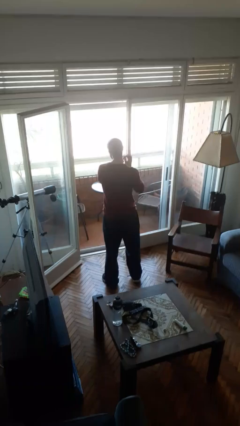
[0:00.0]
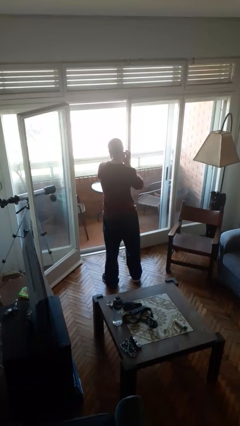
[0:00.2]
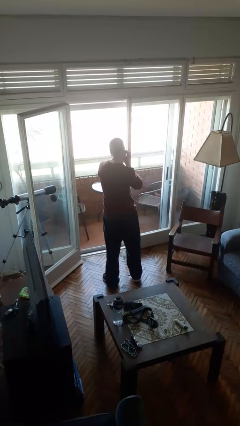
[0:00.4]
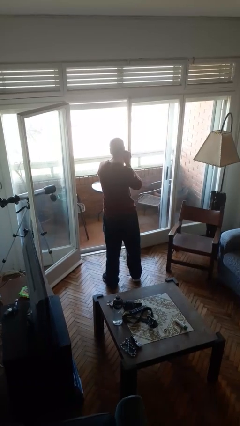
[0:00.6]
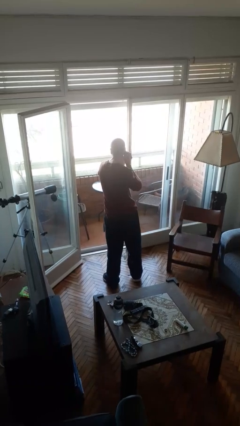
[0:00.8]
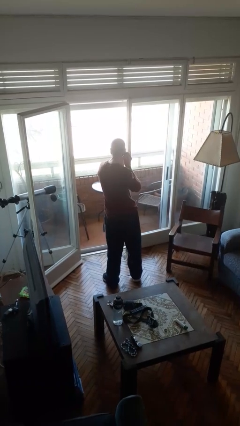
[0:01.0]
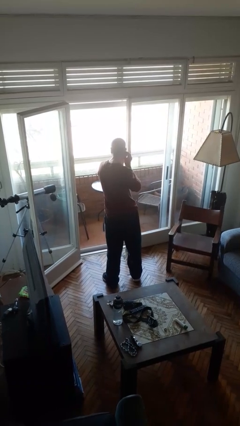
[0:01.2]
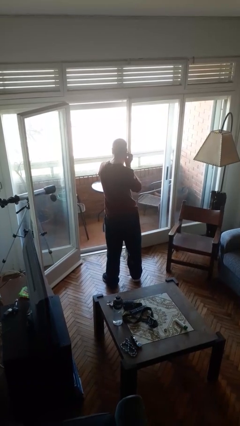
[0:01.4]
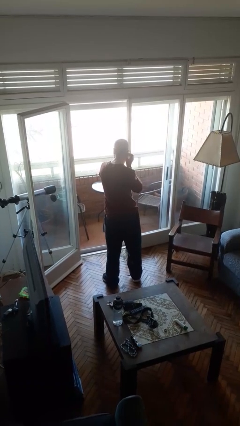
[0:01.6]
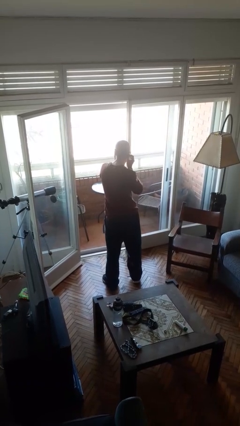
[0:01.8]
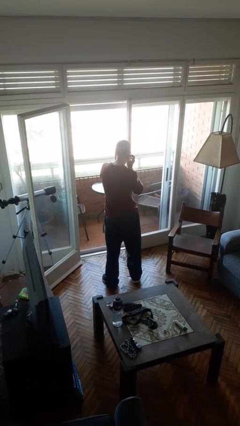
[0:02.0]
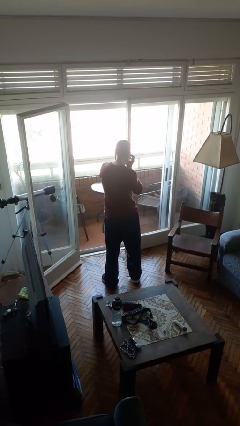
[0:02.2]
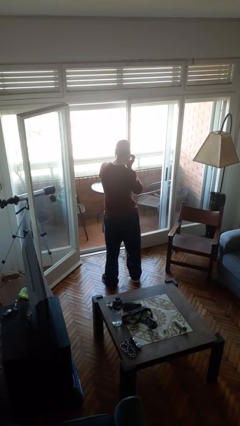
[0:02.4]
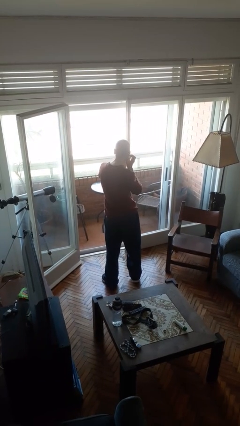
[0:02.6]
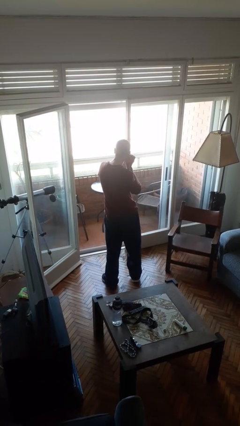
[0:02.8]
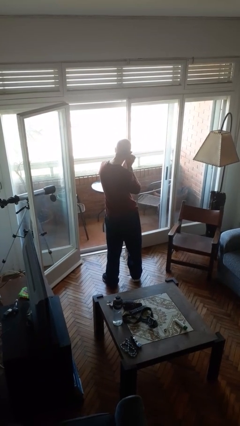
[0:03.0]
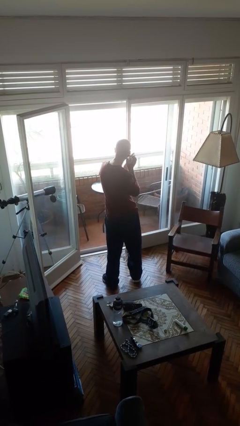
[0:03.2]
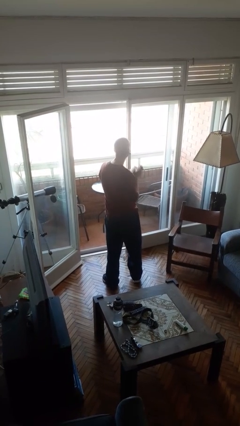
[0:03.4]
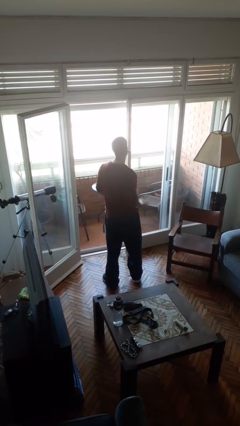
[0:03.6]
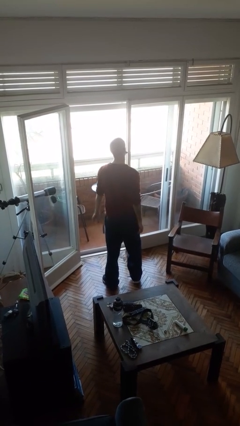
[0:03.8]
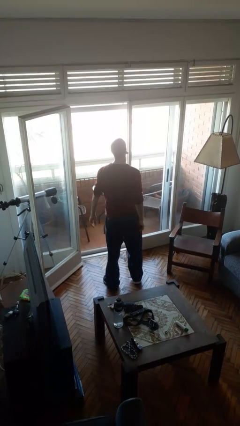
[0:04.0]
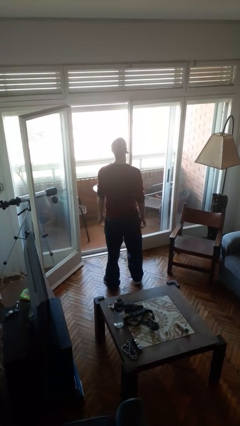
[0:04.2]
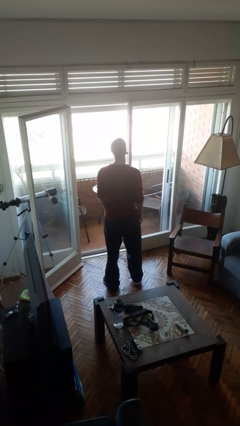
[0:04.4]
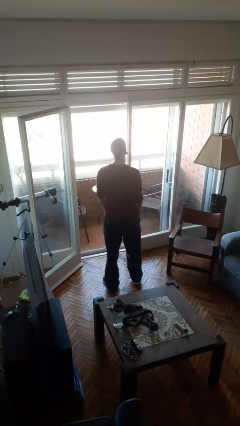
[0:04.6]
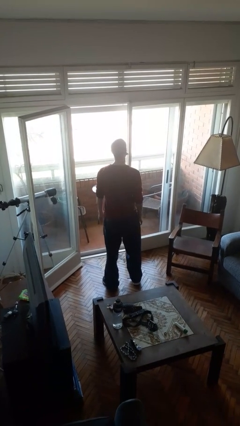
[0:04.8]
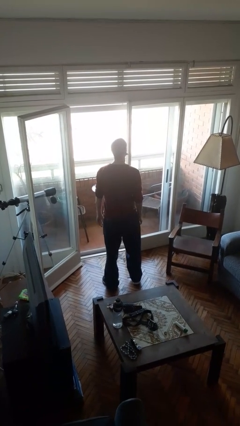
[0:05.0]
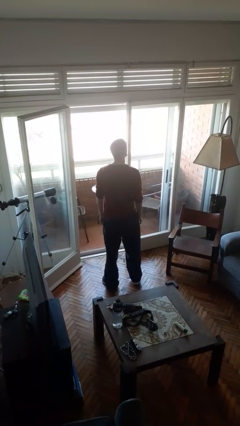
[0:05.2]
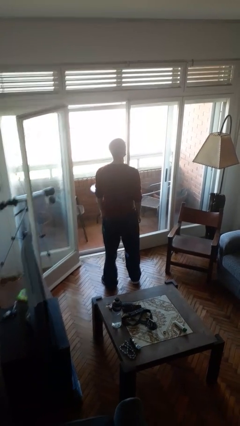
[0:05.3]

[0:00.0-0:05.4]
person puts on earrings

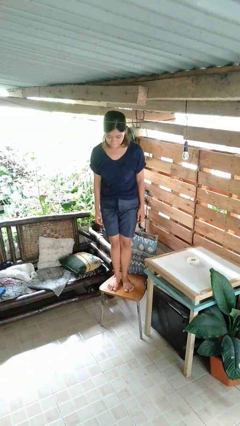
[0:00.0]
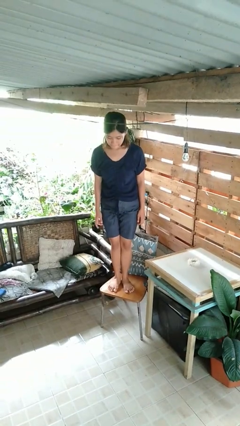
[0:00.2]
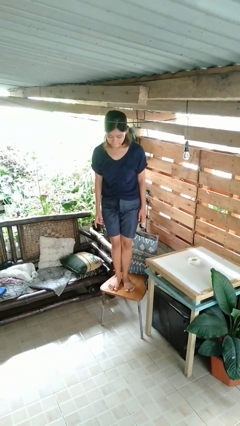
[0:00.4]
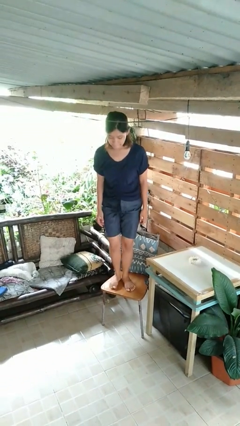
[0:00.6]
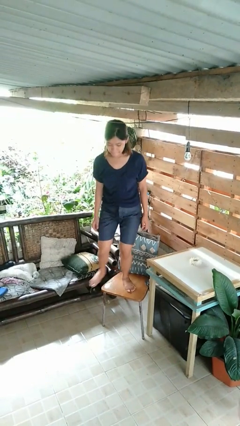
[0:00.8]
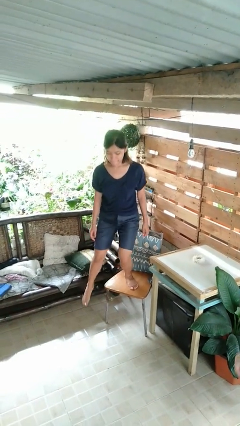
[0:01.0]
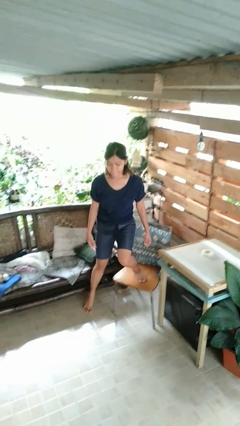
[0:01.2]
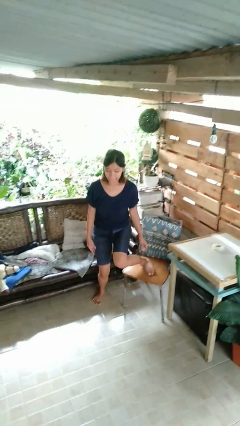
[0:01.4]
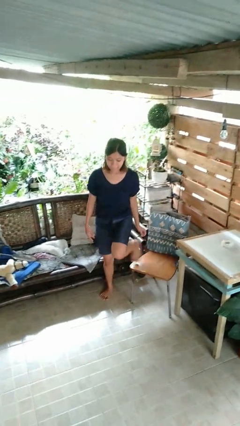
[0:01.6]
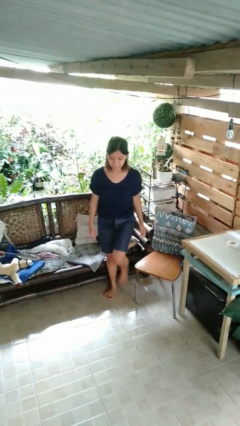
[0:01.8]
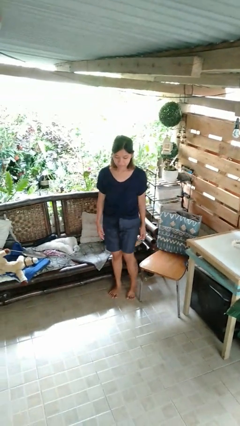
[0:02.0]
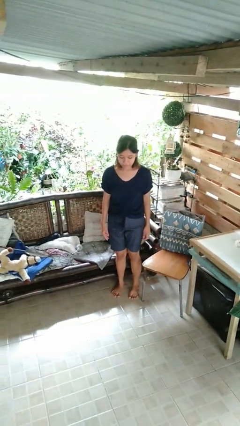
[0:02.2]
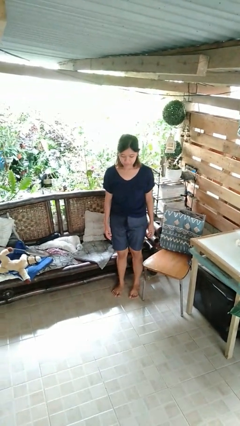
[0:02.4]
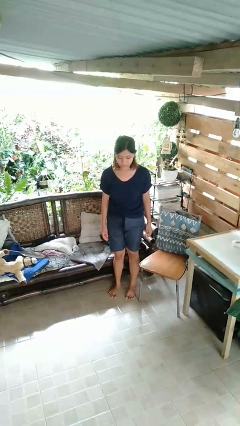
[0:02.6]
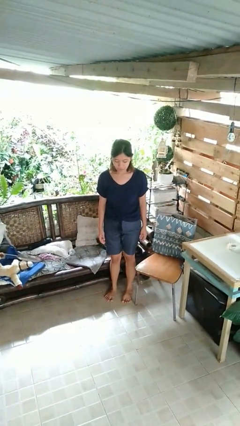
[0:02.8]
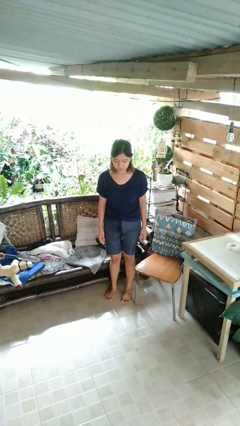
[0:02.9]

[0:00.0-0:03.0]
person climbs off chair

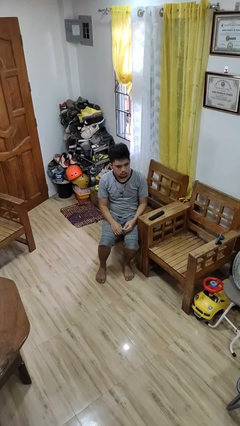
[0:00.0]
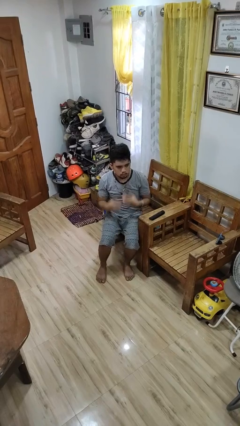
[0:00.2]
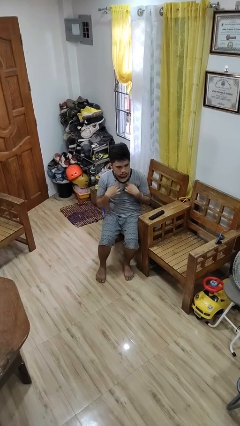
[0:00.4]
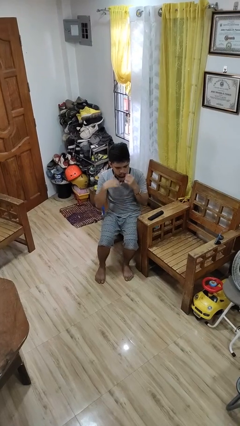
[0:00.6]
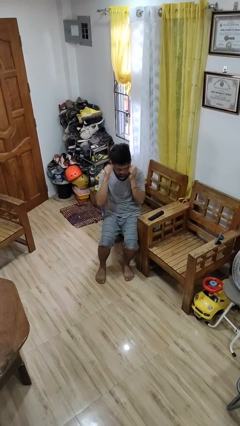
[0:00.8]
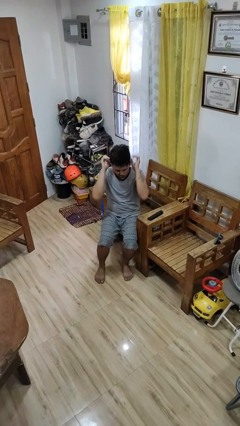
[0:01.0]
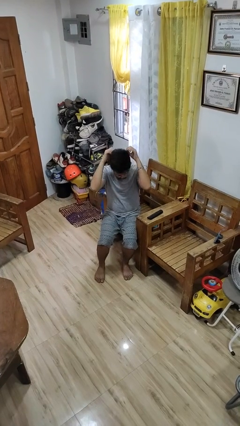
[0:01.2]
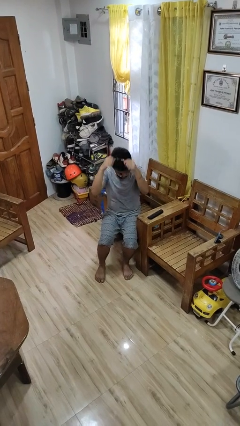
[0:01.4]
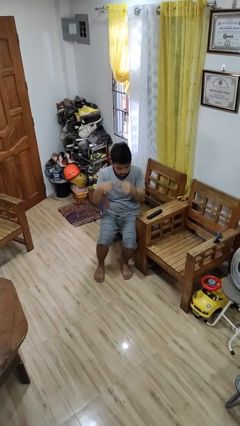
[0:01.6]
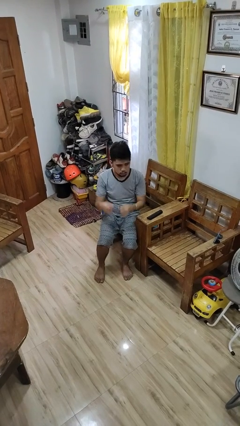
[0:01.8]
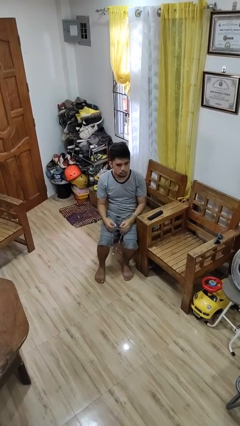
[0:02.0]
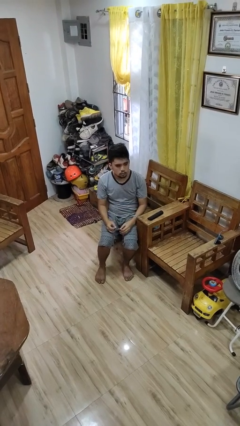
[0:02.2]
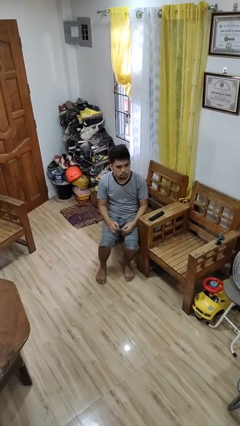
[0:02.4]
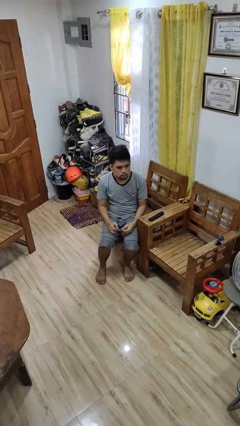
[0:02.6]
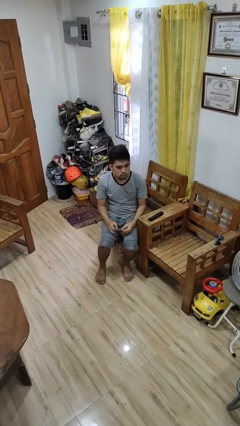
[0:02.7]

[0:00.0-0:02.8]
person takes off necklace

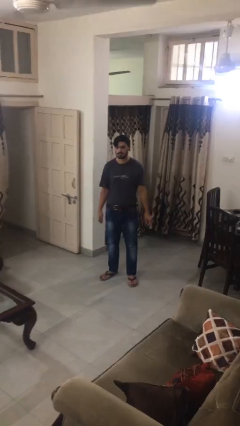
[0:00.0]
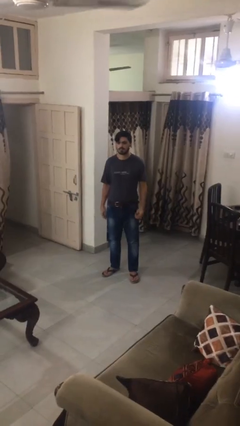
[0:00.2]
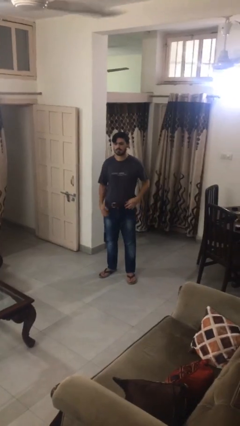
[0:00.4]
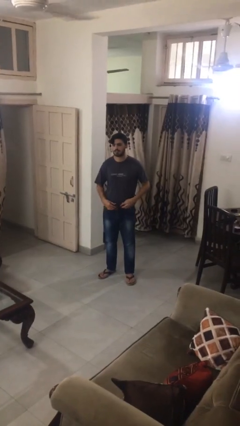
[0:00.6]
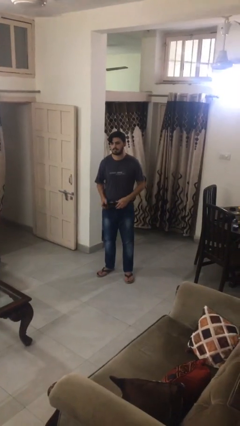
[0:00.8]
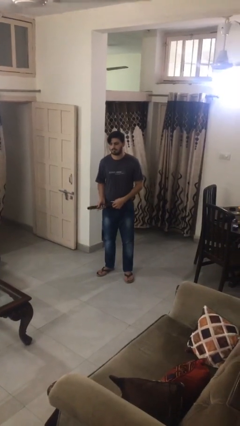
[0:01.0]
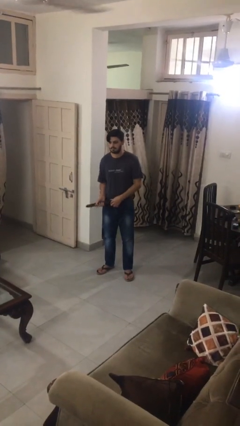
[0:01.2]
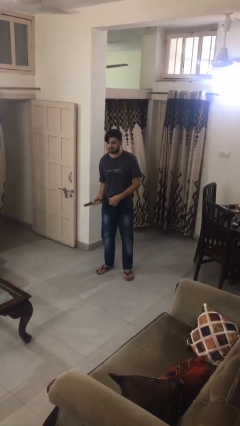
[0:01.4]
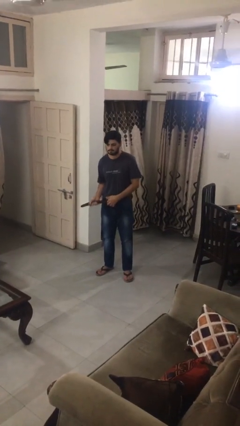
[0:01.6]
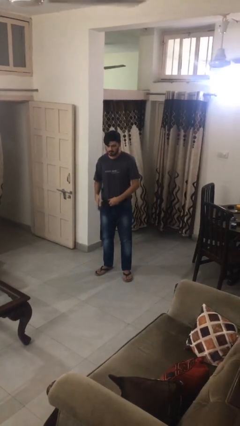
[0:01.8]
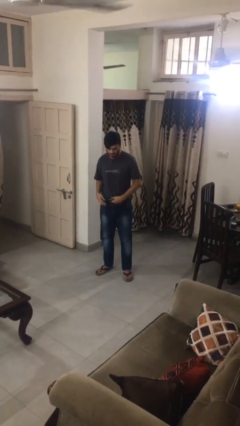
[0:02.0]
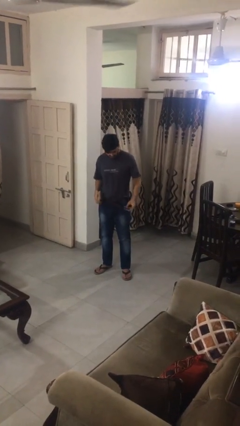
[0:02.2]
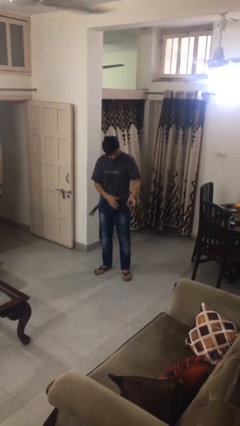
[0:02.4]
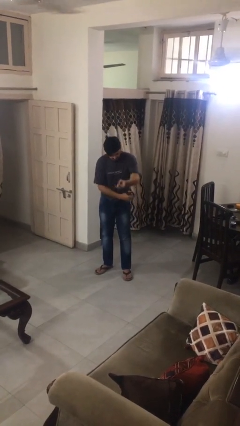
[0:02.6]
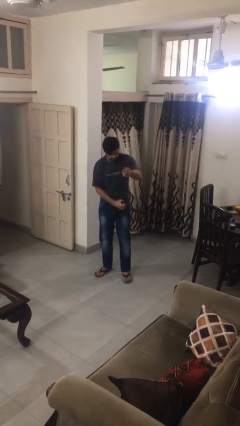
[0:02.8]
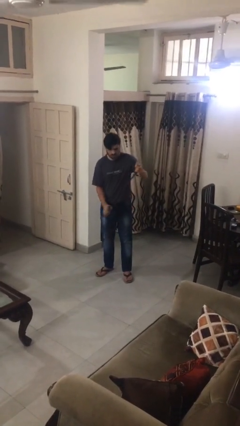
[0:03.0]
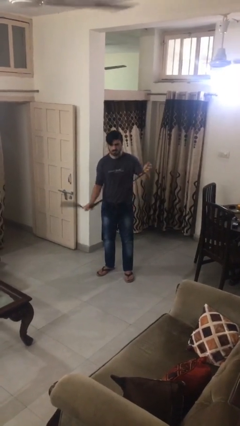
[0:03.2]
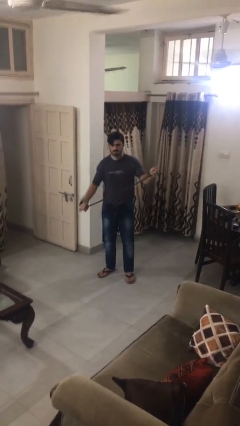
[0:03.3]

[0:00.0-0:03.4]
person takes off belt

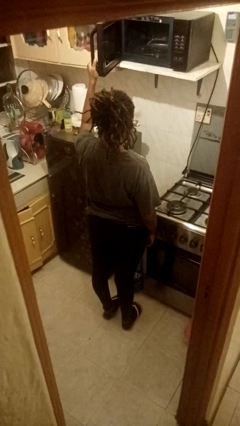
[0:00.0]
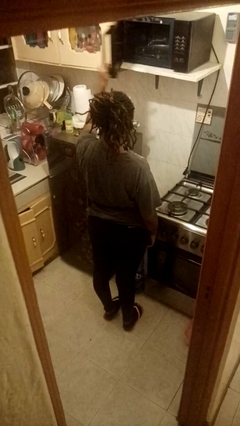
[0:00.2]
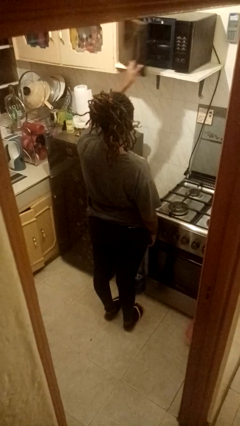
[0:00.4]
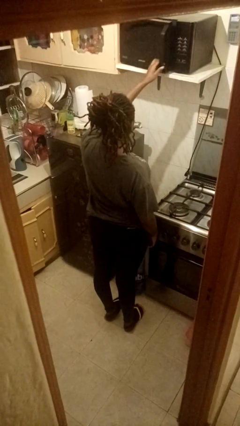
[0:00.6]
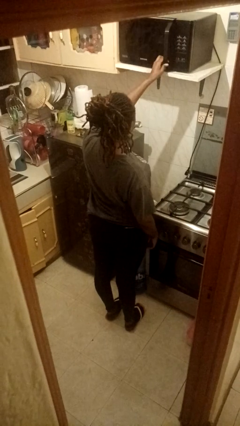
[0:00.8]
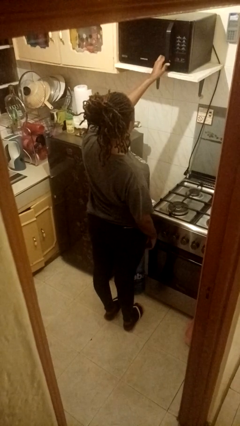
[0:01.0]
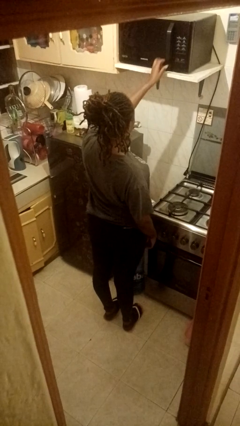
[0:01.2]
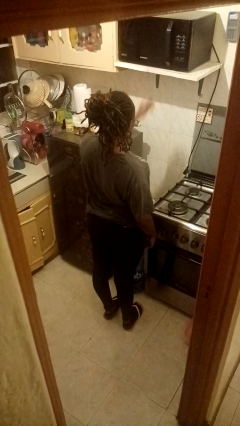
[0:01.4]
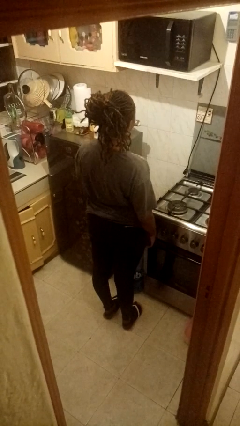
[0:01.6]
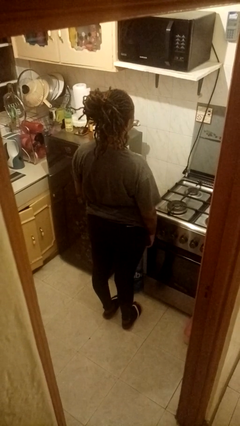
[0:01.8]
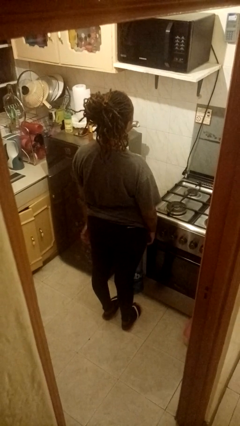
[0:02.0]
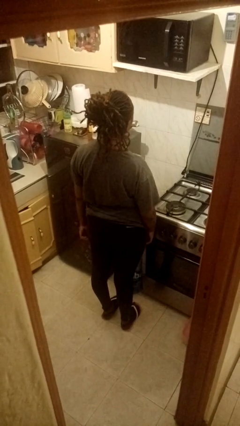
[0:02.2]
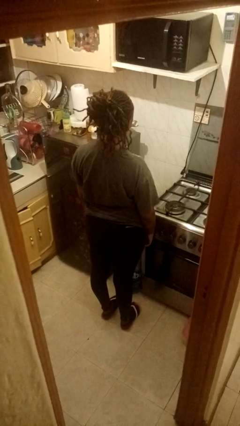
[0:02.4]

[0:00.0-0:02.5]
person closes microwave

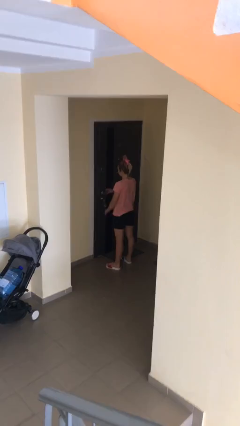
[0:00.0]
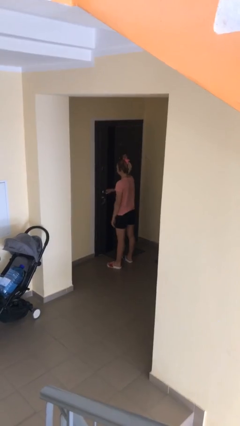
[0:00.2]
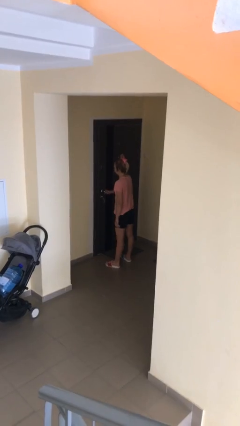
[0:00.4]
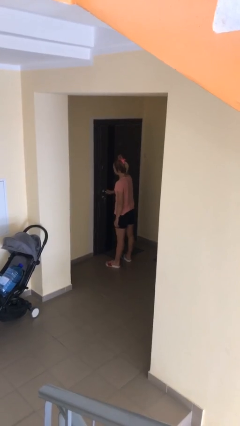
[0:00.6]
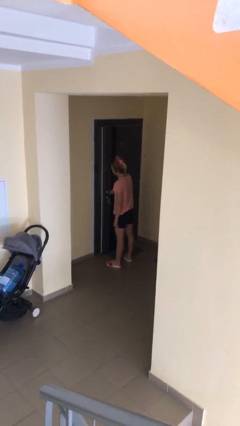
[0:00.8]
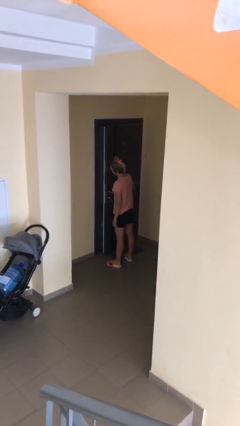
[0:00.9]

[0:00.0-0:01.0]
person opens facility door
